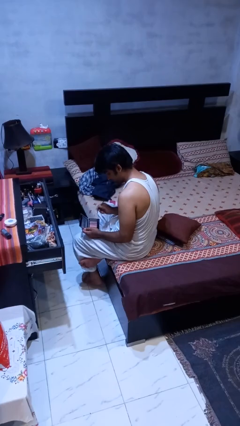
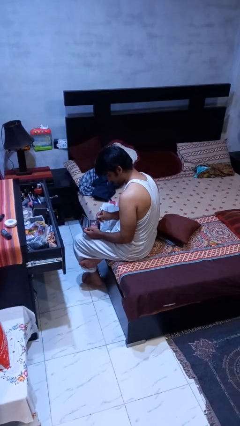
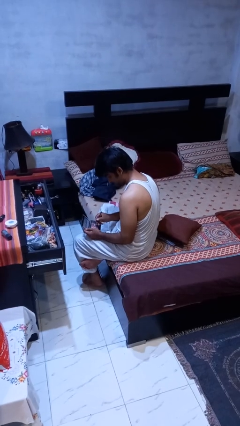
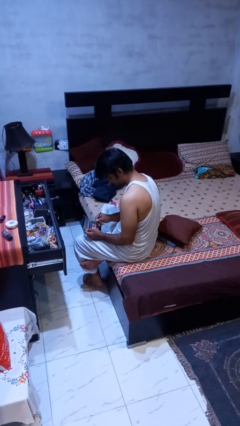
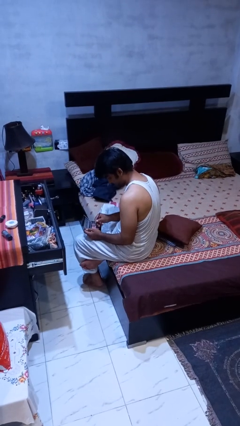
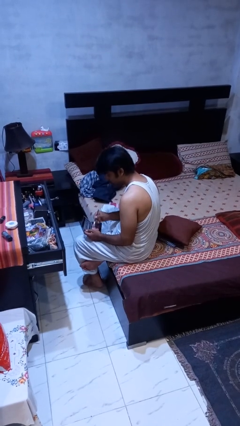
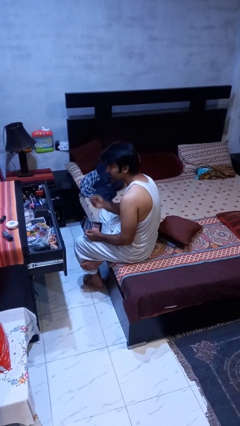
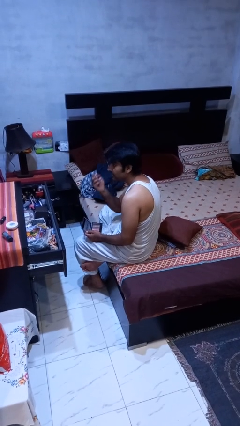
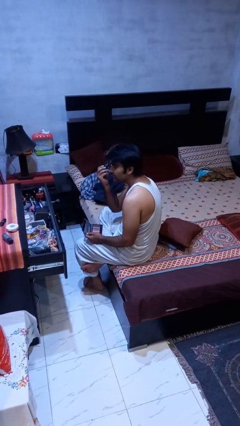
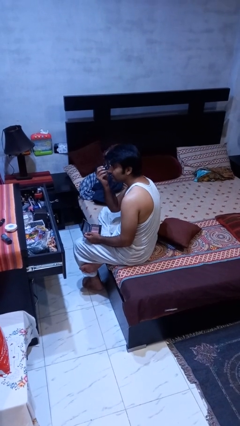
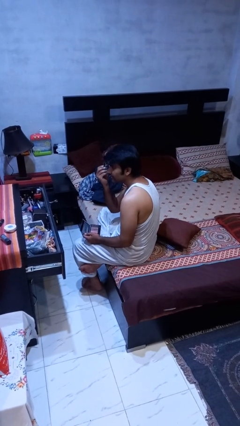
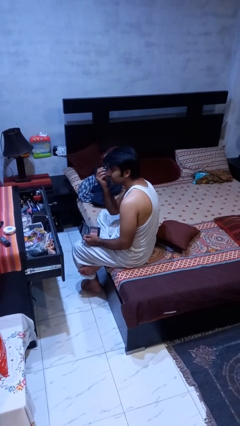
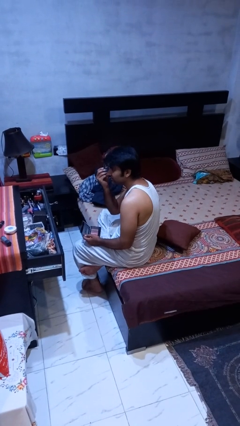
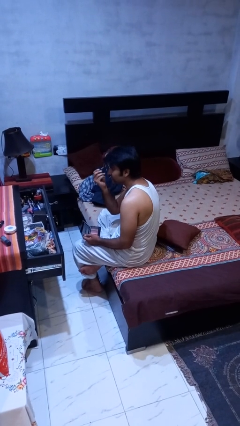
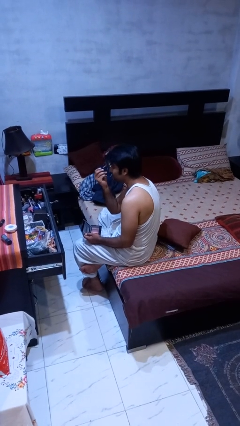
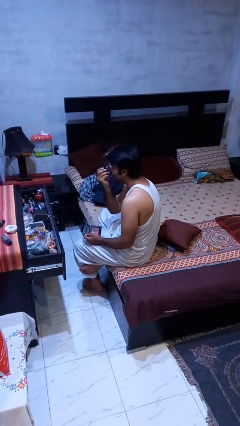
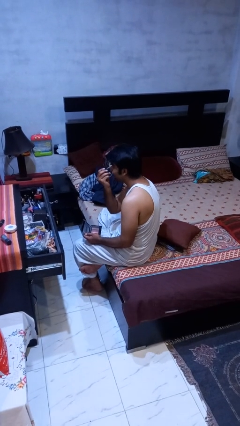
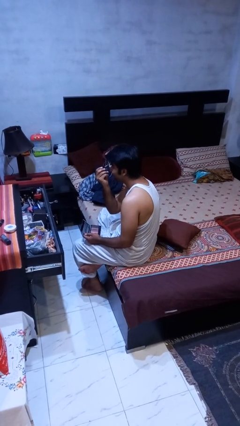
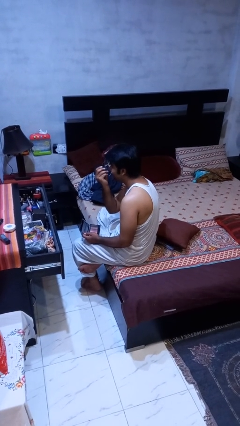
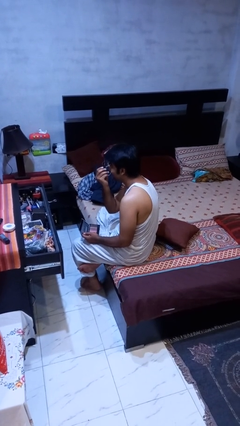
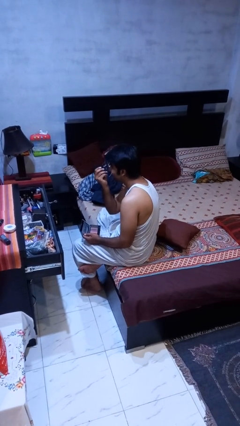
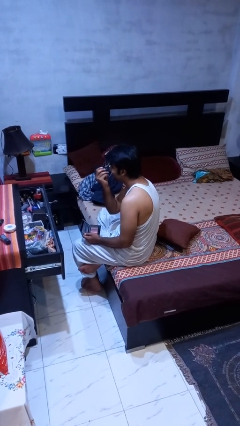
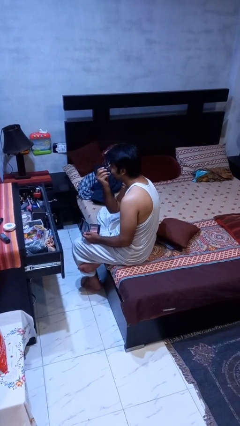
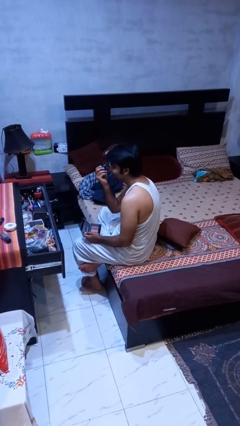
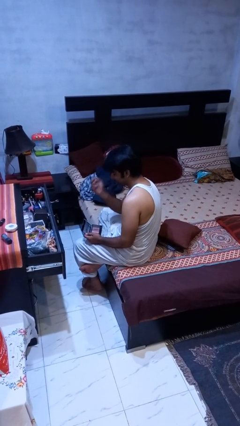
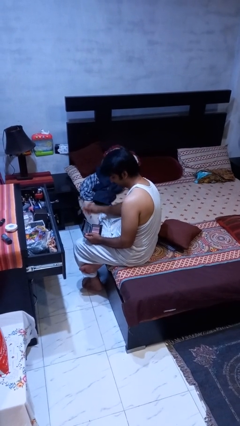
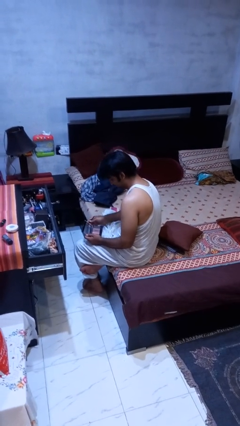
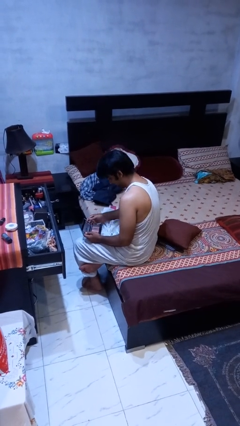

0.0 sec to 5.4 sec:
person applies eye makeup

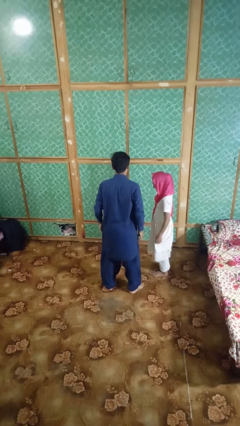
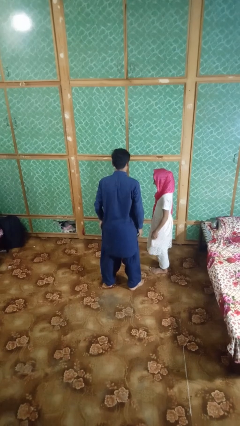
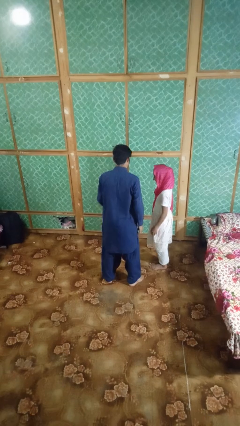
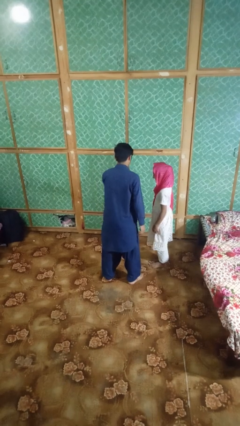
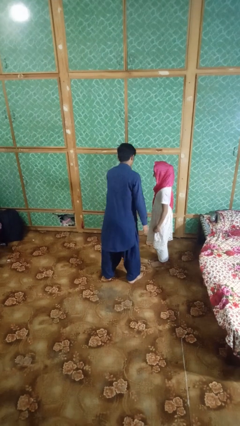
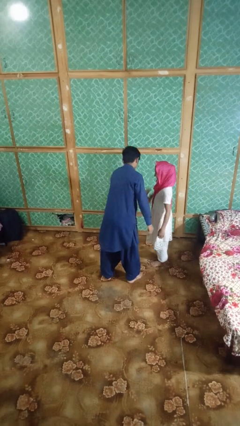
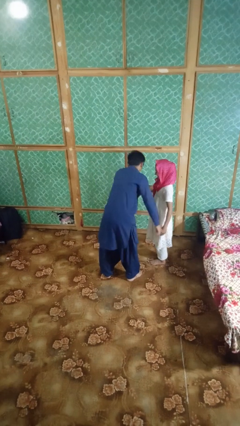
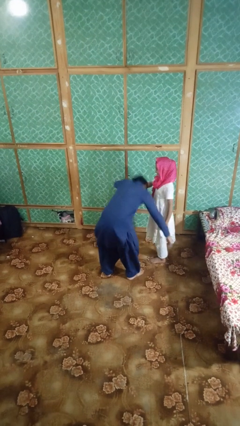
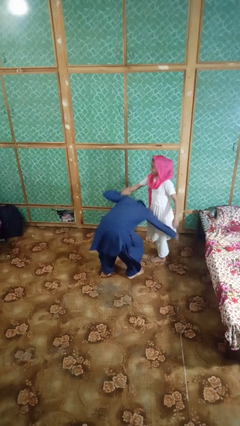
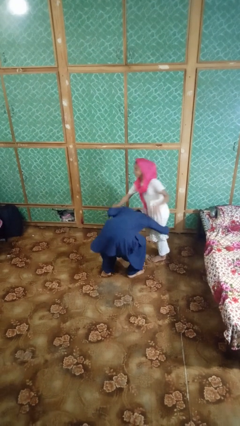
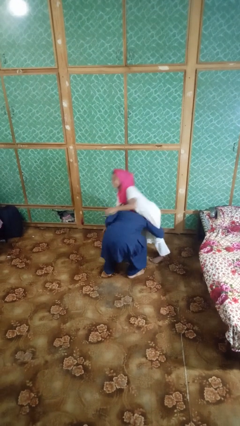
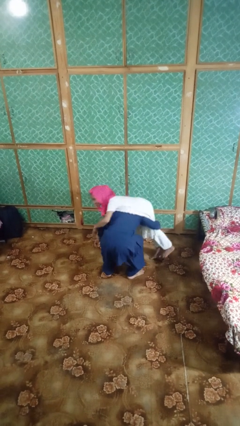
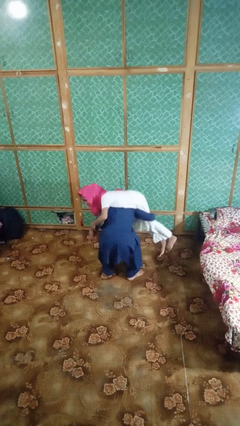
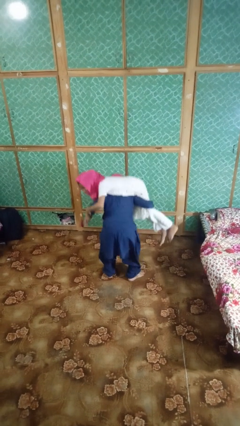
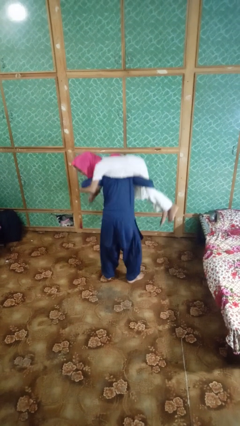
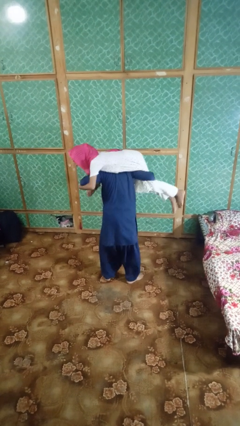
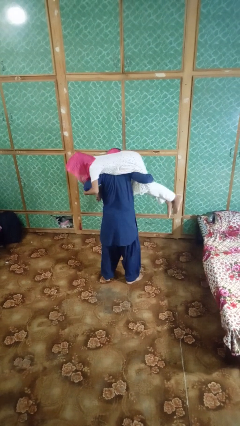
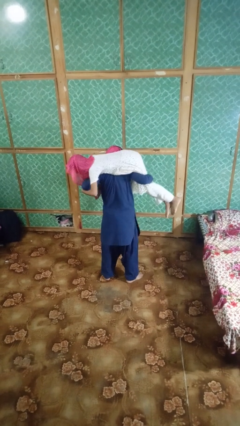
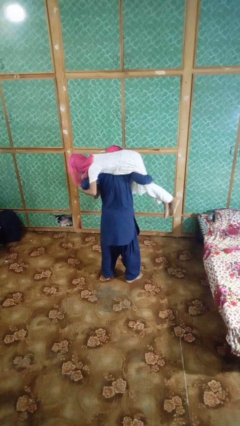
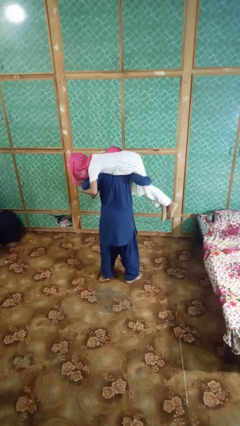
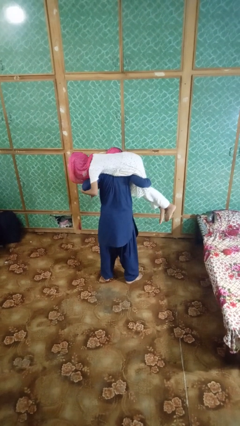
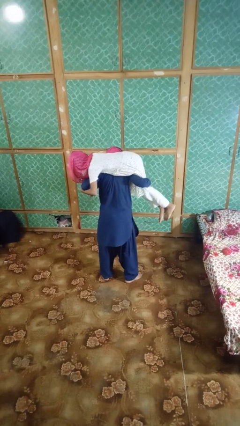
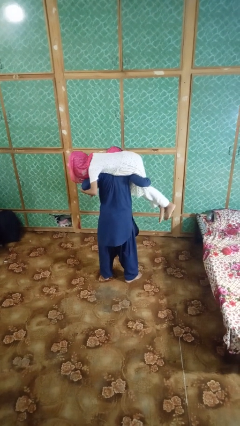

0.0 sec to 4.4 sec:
person carries person on shoulders

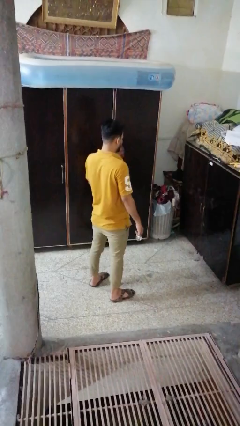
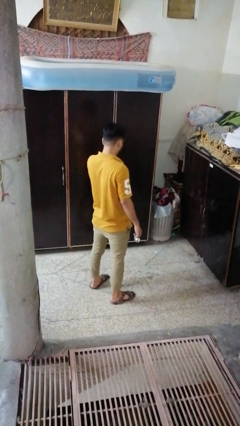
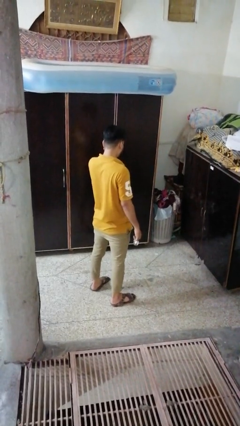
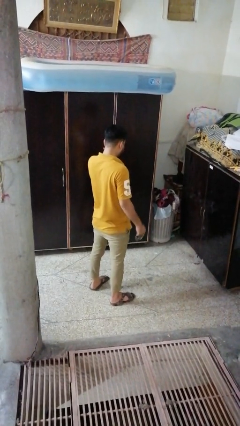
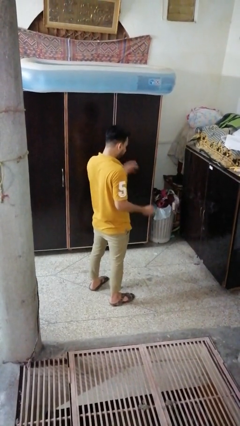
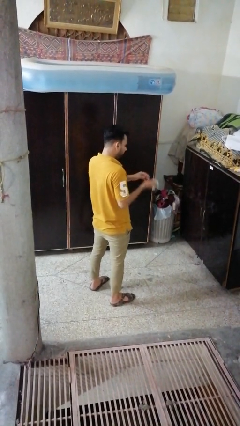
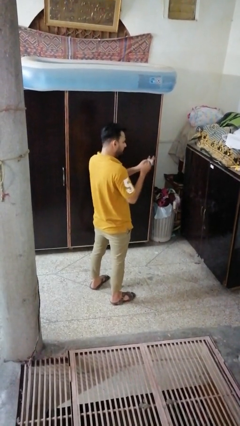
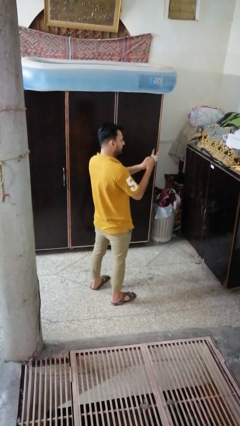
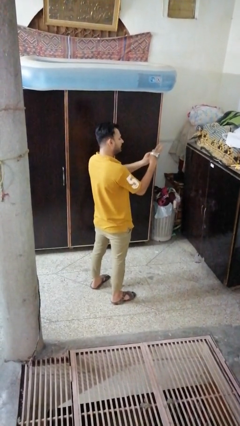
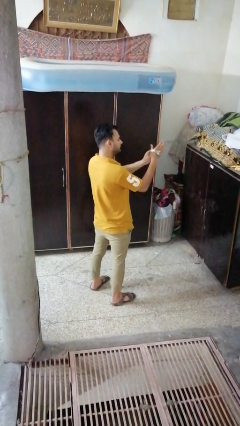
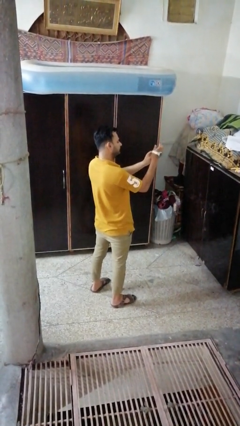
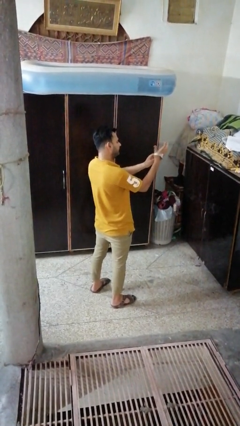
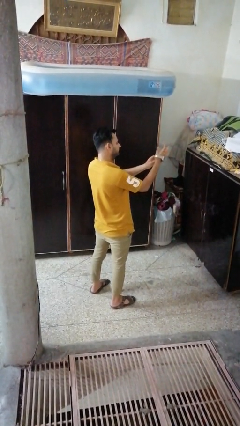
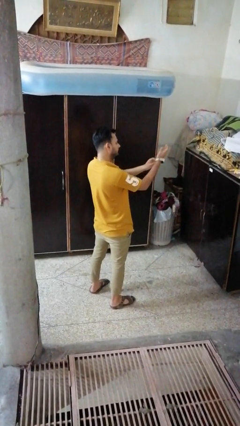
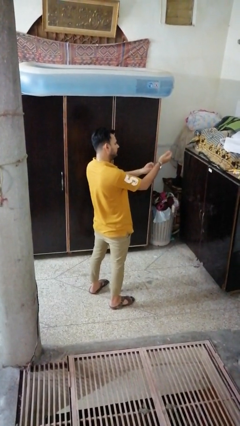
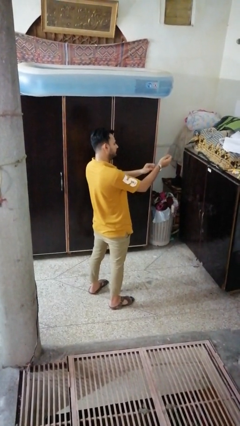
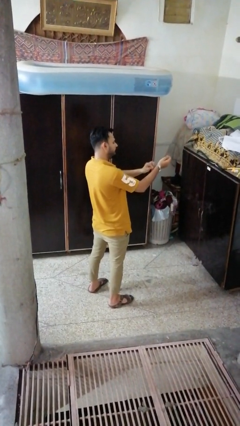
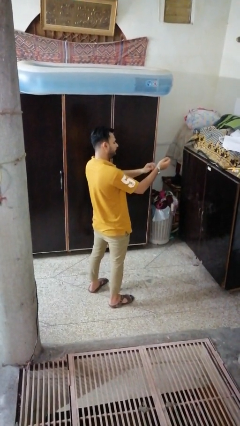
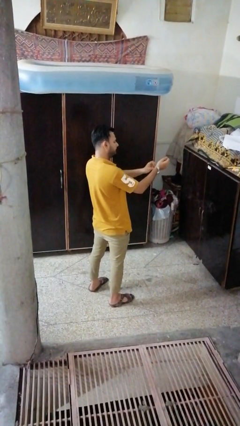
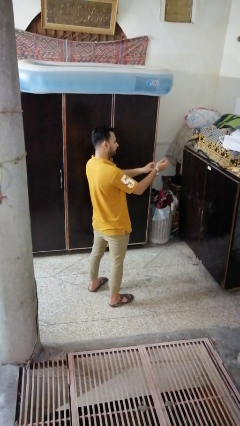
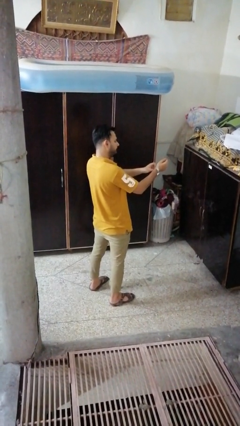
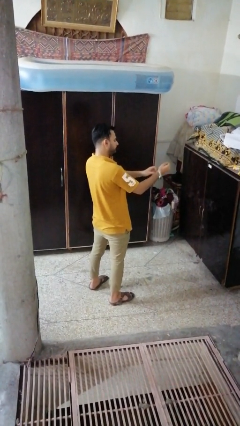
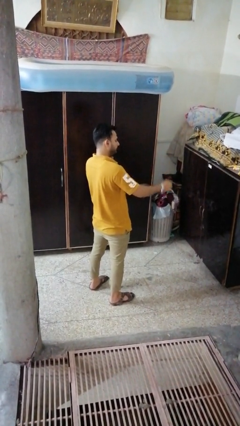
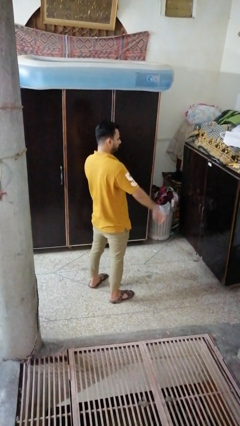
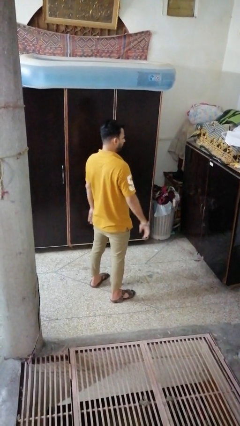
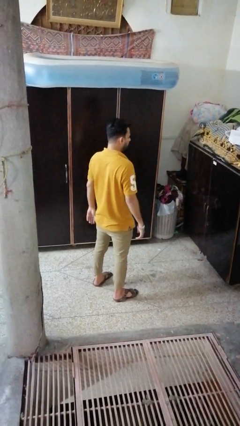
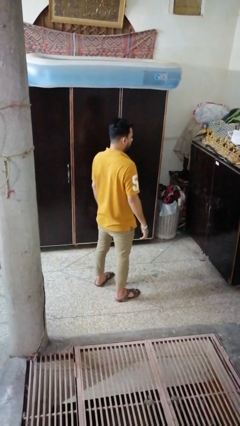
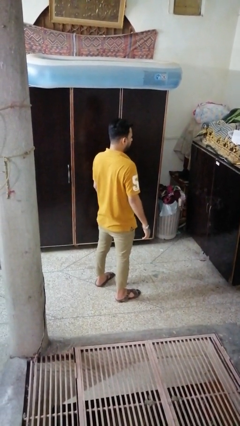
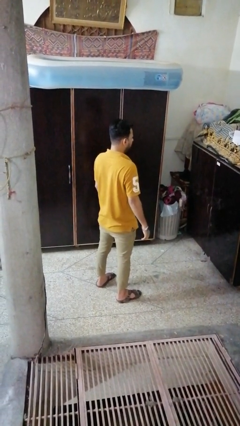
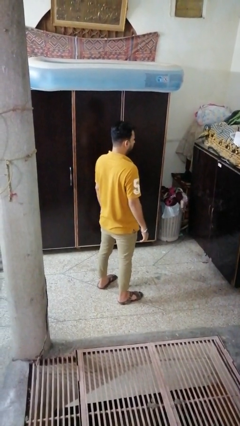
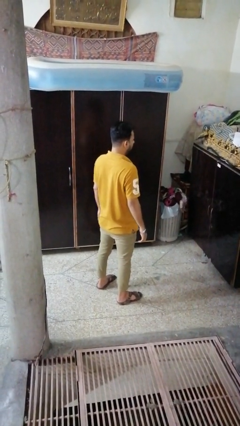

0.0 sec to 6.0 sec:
person puts on wristwatch

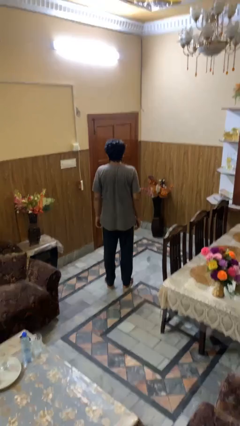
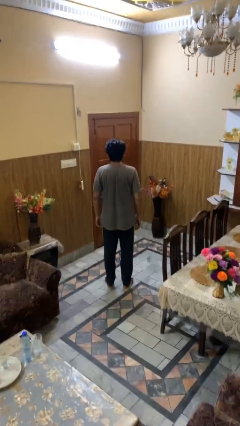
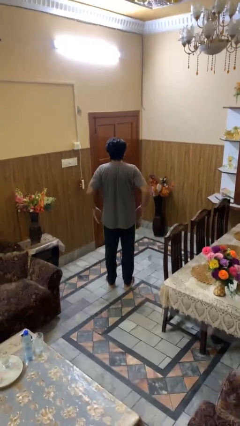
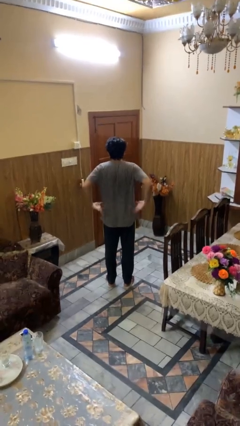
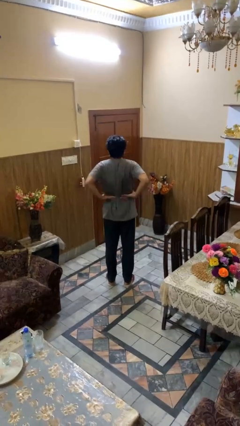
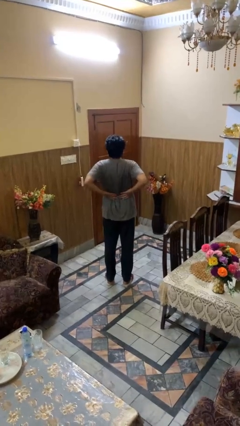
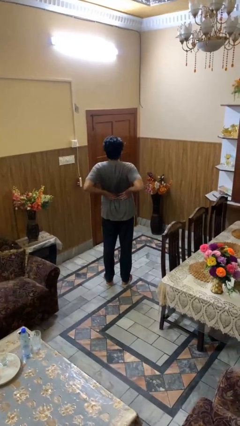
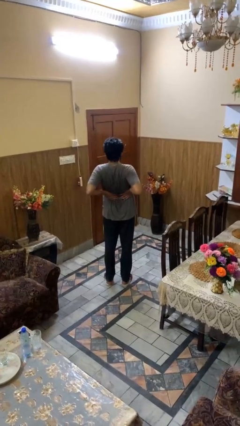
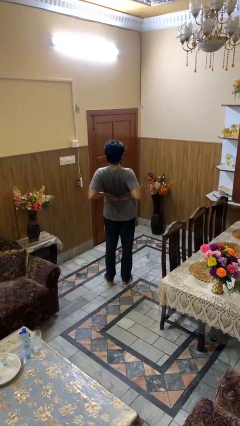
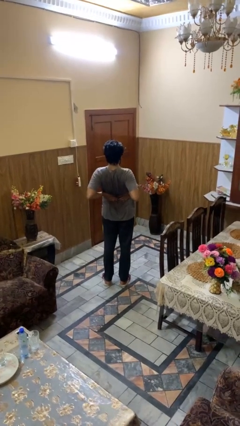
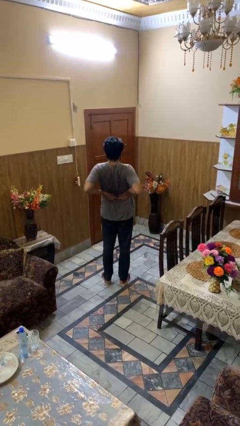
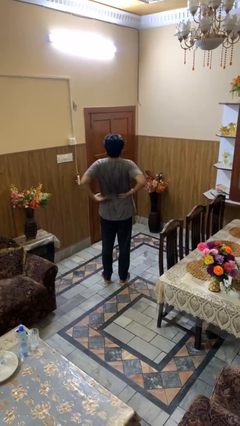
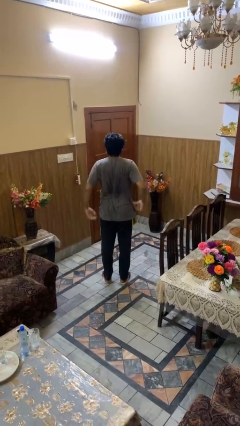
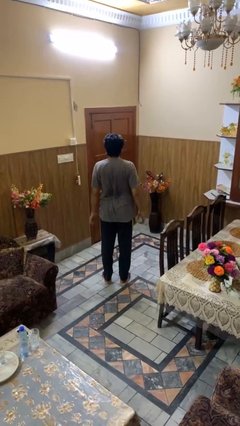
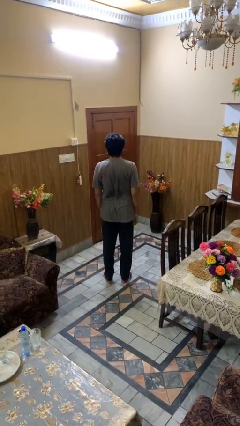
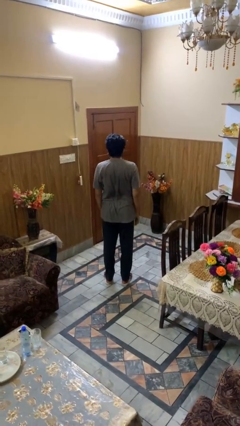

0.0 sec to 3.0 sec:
person stretches back
